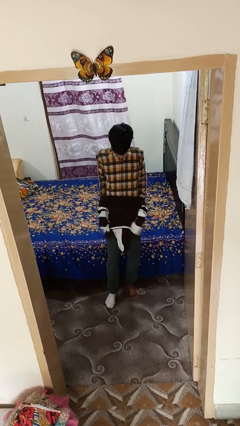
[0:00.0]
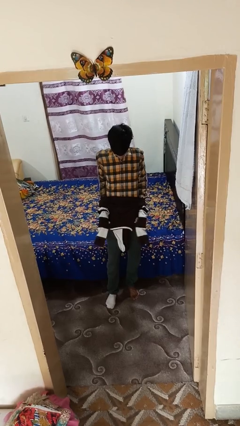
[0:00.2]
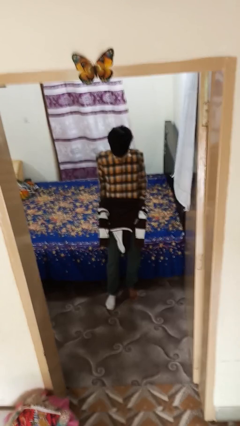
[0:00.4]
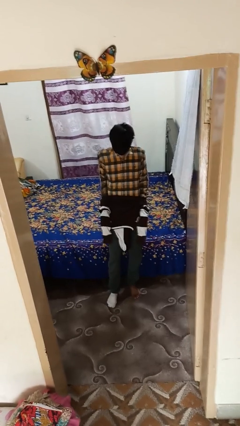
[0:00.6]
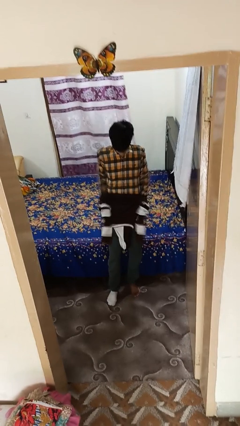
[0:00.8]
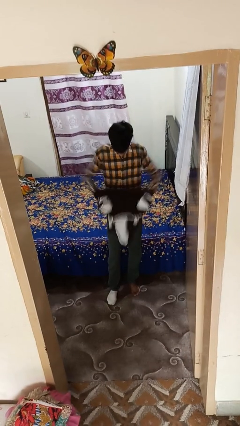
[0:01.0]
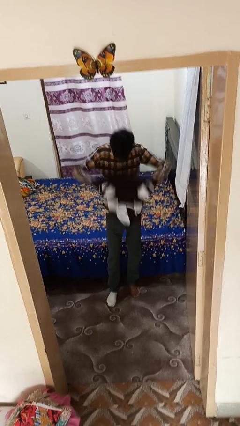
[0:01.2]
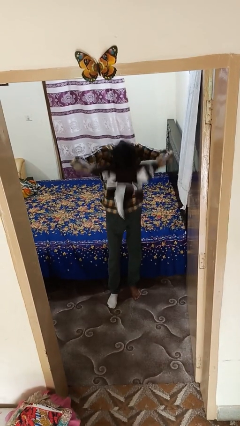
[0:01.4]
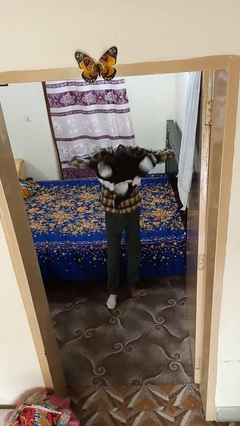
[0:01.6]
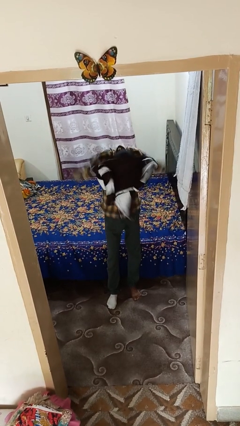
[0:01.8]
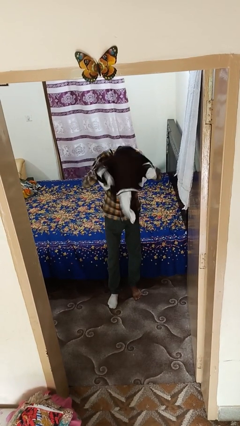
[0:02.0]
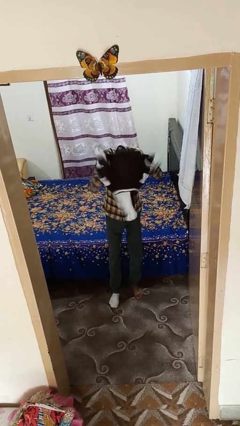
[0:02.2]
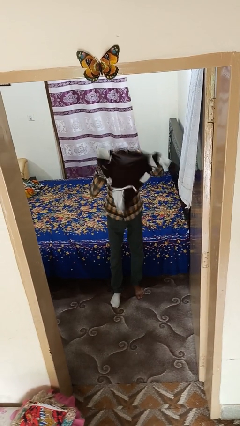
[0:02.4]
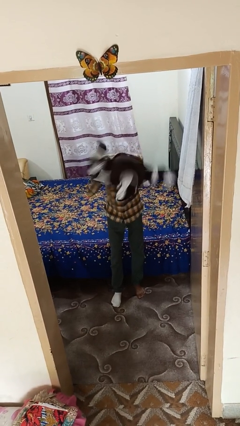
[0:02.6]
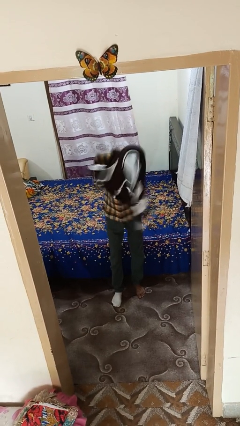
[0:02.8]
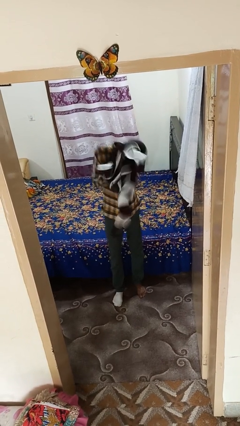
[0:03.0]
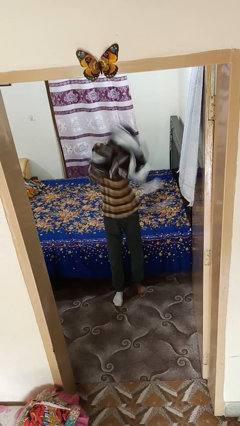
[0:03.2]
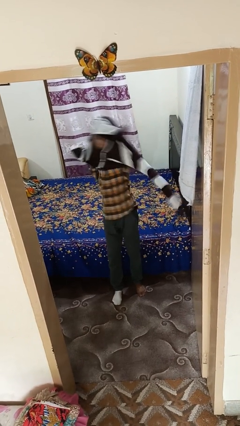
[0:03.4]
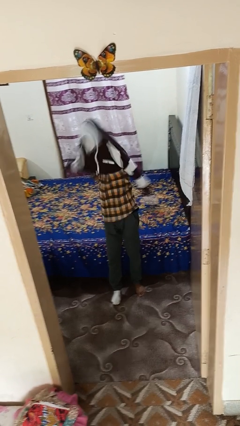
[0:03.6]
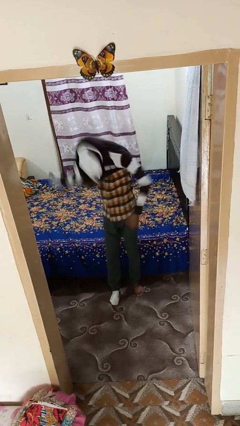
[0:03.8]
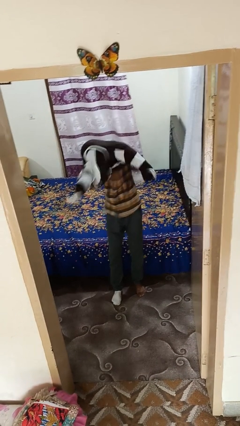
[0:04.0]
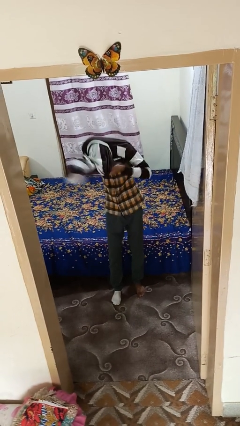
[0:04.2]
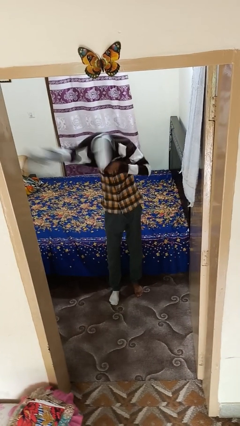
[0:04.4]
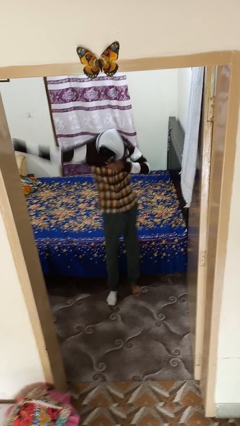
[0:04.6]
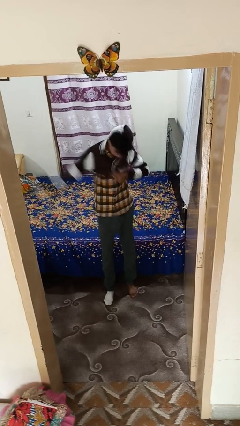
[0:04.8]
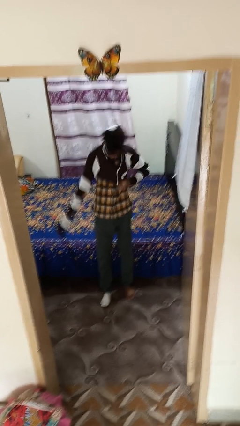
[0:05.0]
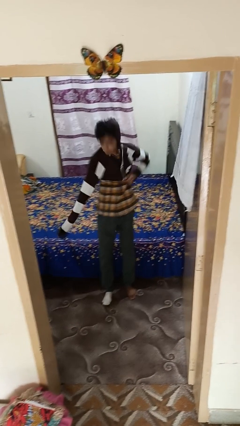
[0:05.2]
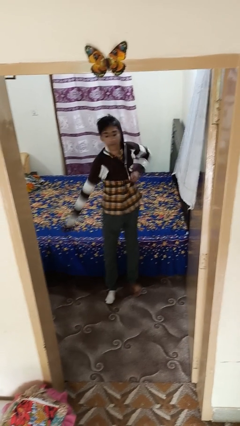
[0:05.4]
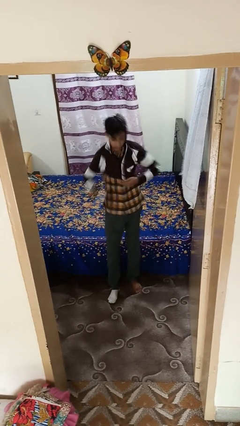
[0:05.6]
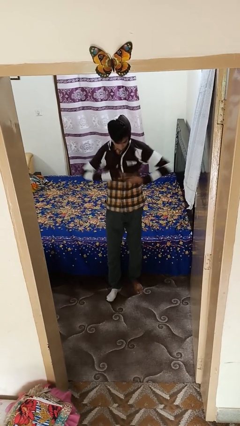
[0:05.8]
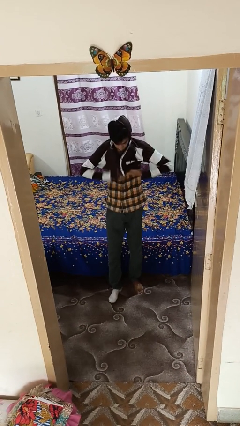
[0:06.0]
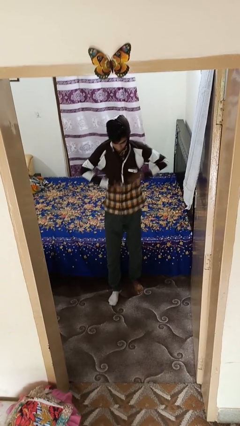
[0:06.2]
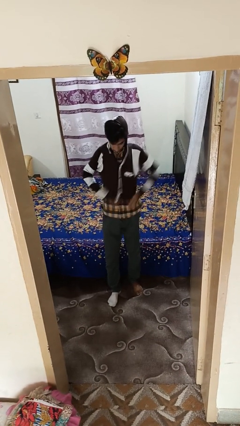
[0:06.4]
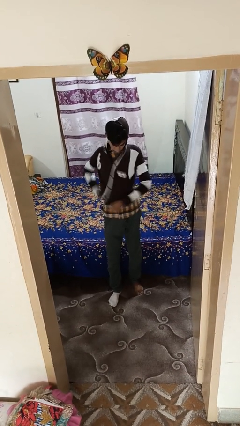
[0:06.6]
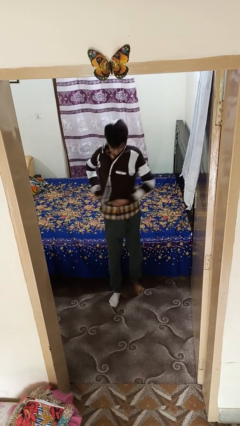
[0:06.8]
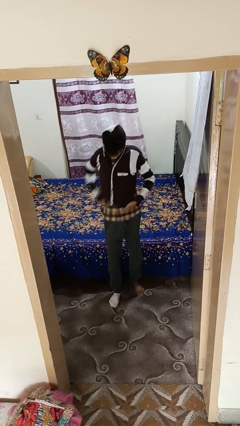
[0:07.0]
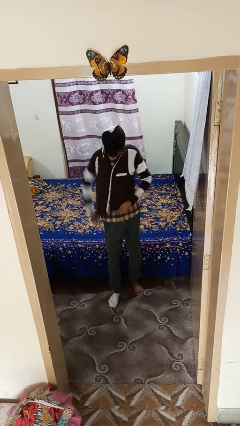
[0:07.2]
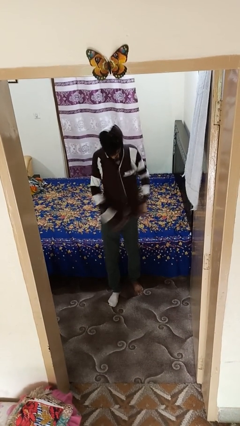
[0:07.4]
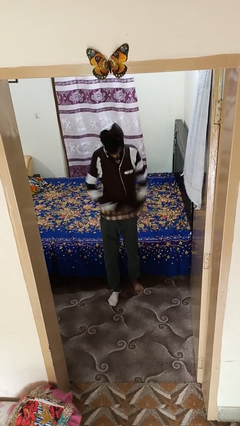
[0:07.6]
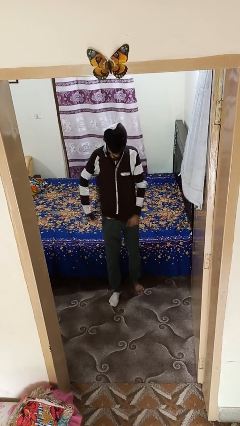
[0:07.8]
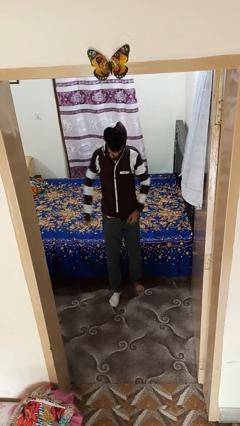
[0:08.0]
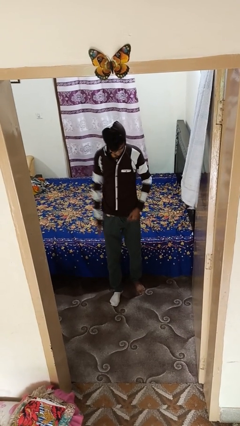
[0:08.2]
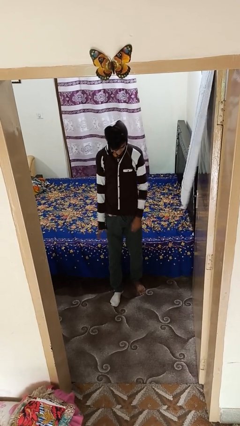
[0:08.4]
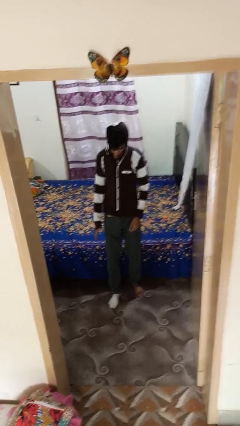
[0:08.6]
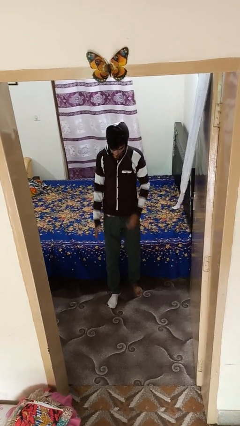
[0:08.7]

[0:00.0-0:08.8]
person puts on hoodie

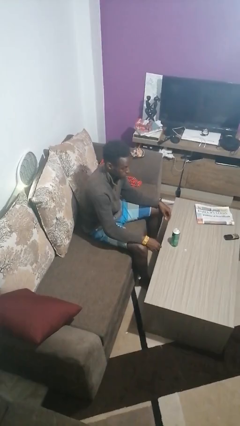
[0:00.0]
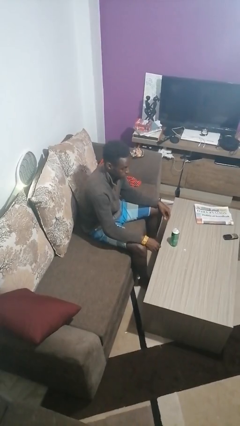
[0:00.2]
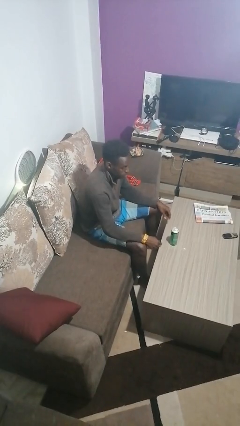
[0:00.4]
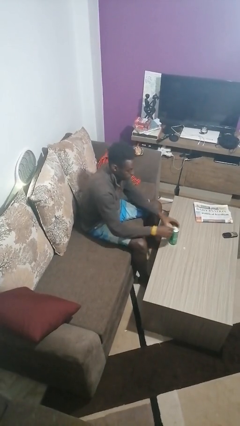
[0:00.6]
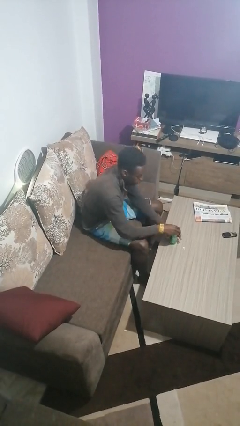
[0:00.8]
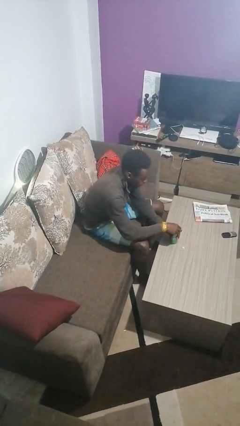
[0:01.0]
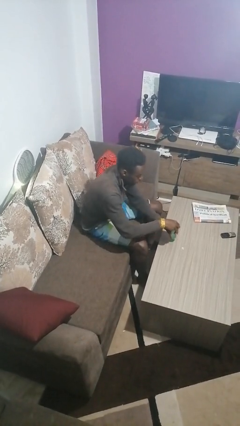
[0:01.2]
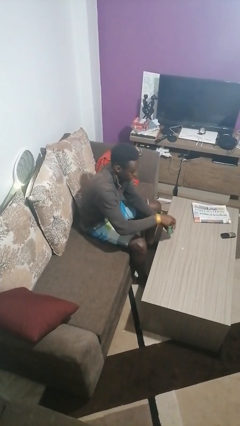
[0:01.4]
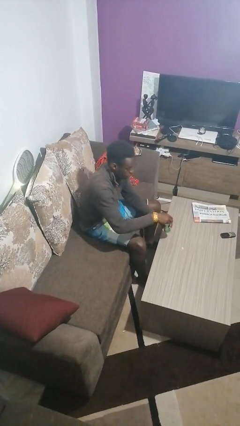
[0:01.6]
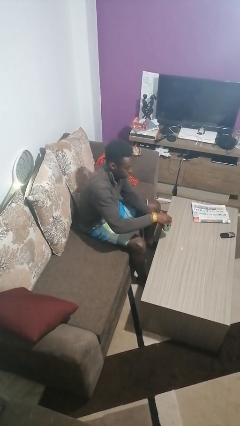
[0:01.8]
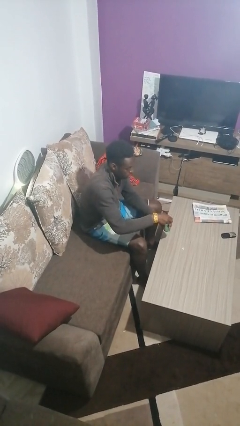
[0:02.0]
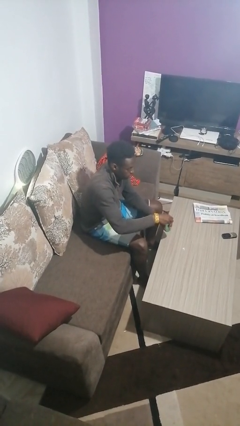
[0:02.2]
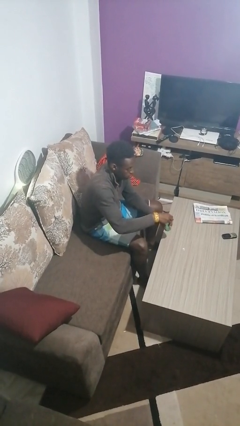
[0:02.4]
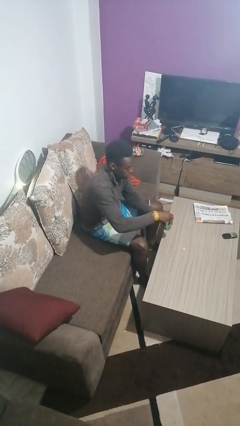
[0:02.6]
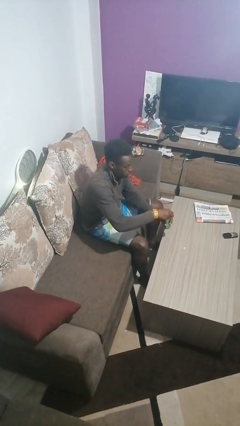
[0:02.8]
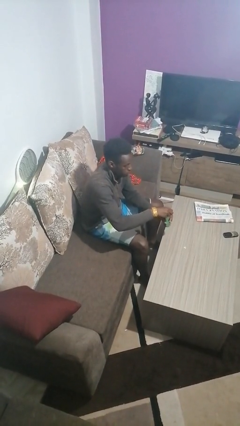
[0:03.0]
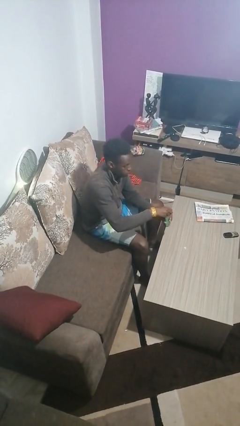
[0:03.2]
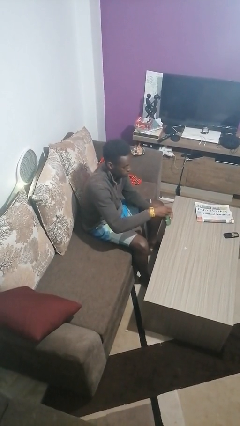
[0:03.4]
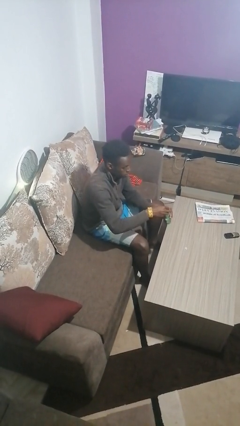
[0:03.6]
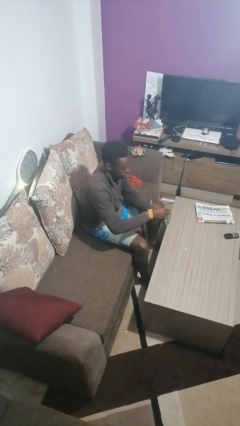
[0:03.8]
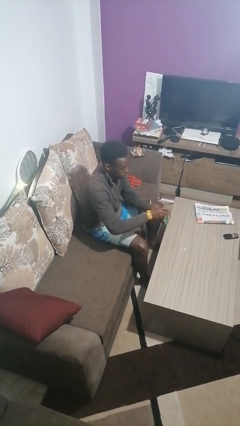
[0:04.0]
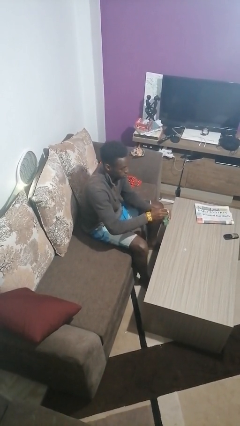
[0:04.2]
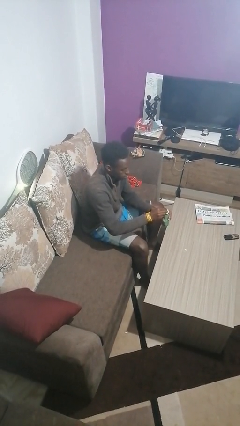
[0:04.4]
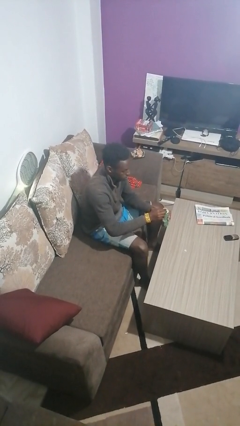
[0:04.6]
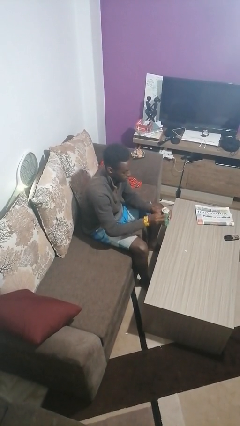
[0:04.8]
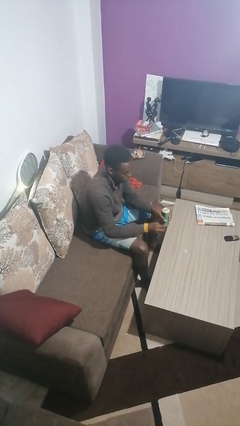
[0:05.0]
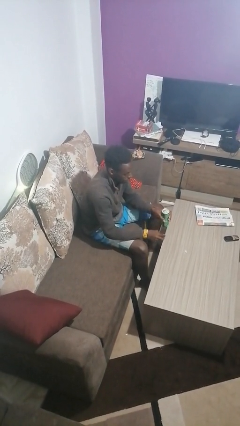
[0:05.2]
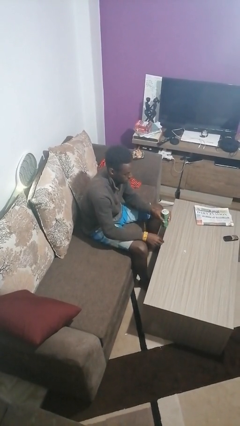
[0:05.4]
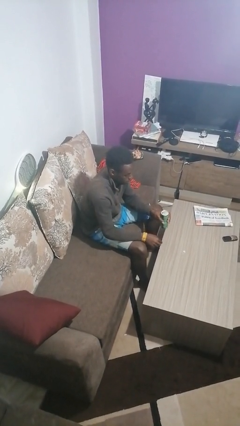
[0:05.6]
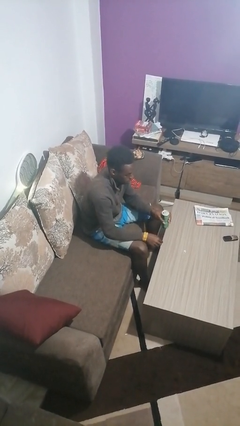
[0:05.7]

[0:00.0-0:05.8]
person opens beverage can

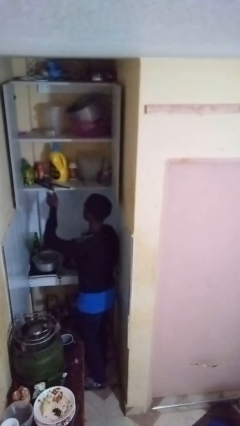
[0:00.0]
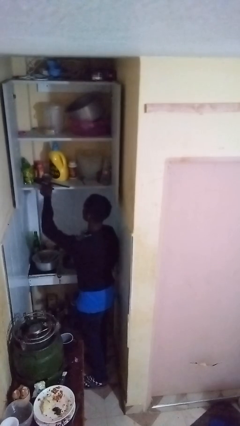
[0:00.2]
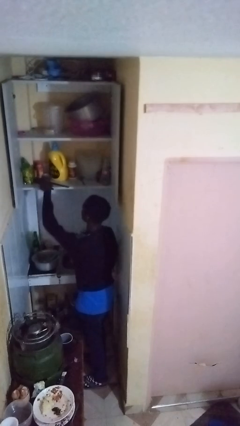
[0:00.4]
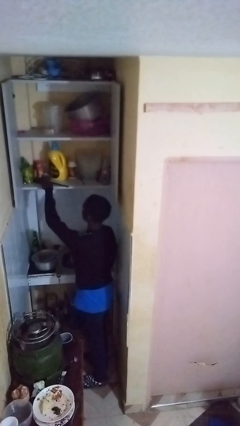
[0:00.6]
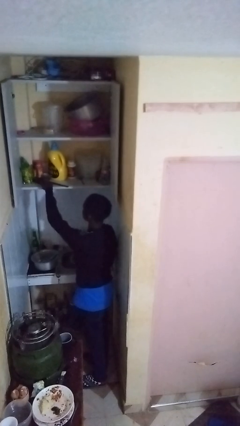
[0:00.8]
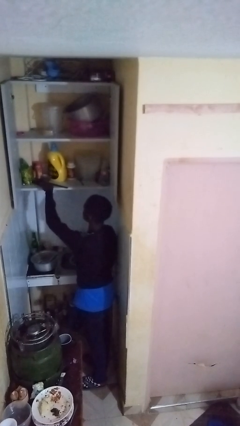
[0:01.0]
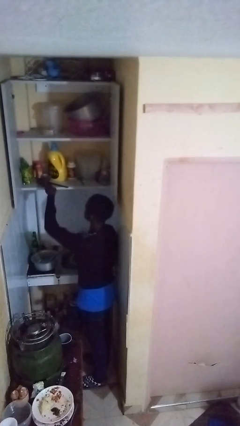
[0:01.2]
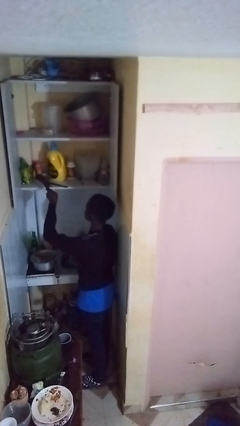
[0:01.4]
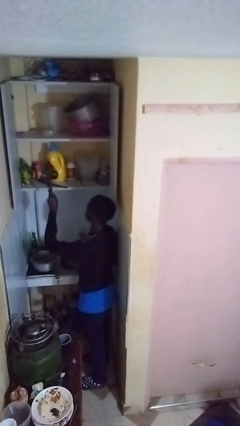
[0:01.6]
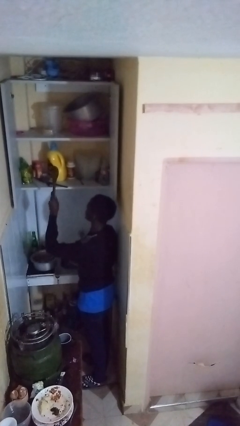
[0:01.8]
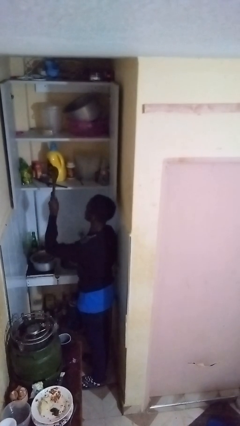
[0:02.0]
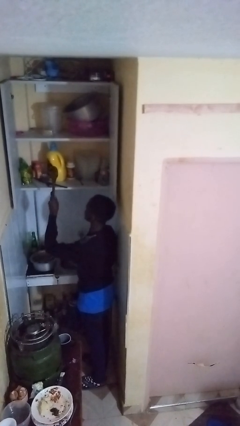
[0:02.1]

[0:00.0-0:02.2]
person takes object from kitchen drawer

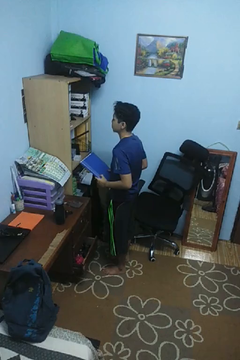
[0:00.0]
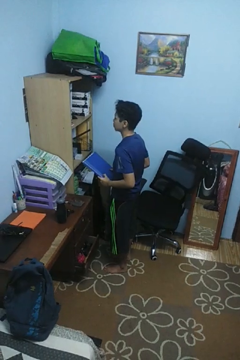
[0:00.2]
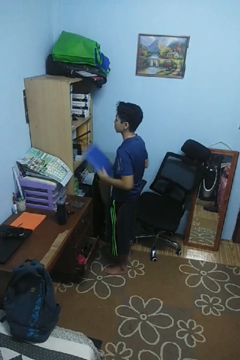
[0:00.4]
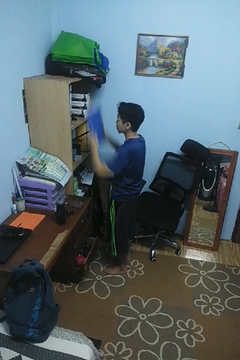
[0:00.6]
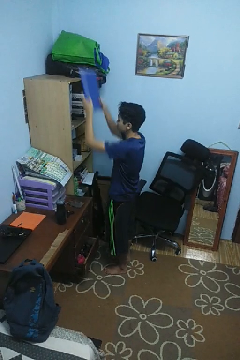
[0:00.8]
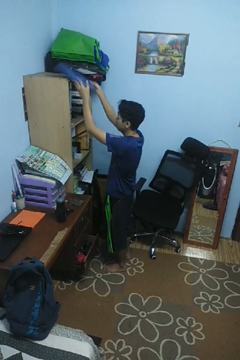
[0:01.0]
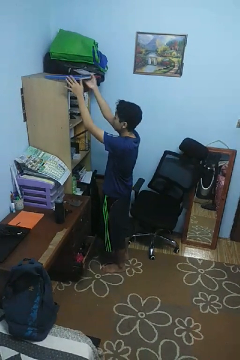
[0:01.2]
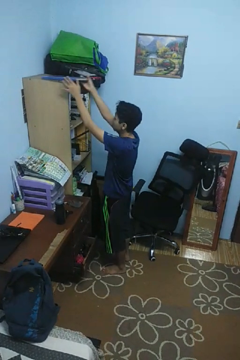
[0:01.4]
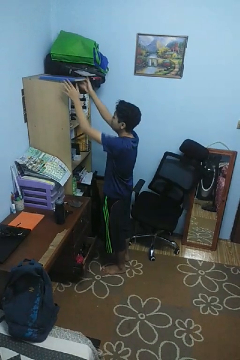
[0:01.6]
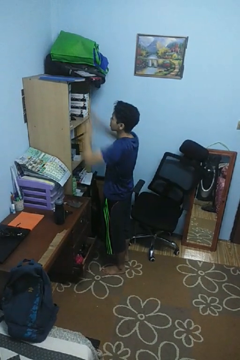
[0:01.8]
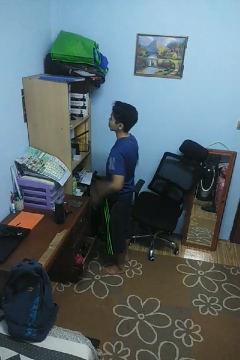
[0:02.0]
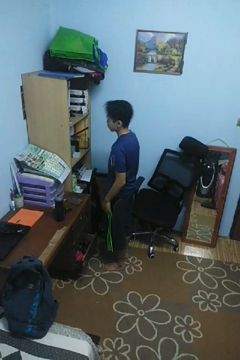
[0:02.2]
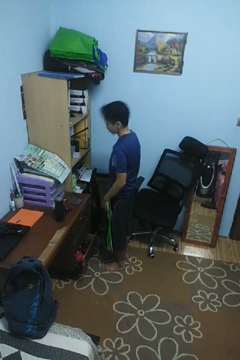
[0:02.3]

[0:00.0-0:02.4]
person puts down object on shelf
